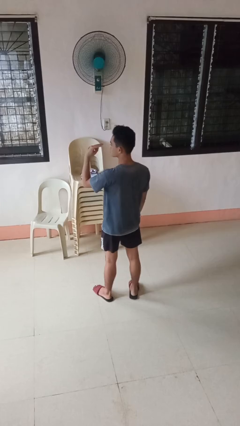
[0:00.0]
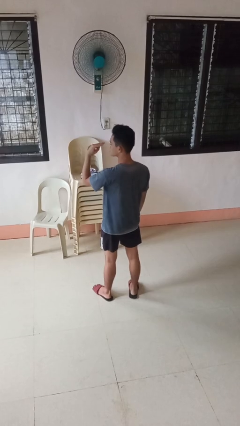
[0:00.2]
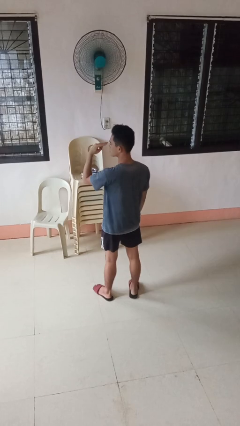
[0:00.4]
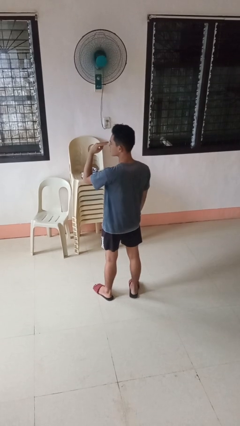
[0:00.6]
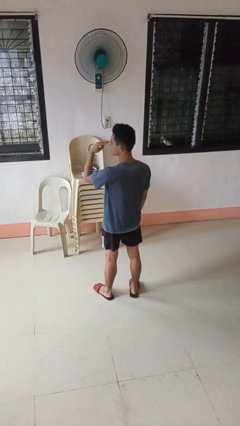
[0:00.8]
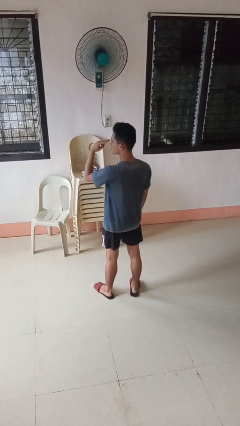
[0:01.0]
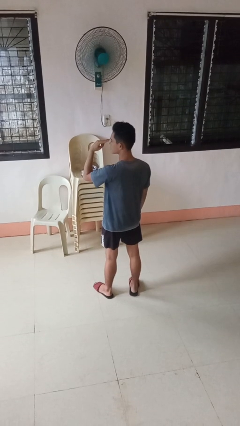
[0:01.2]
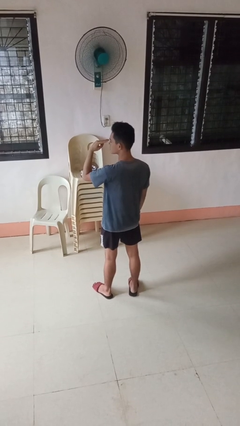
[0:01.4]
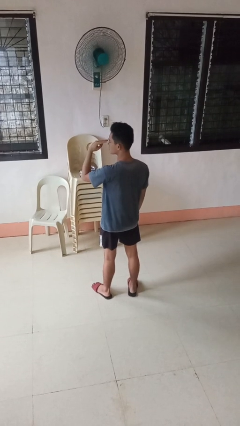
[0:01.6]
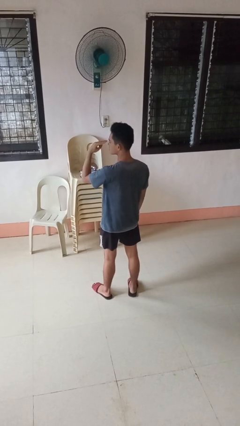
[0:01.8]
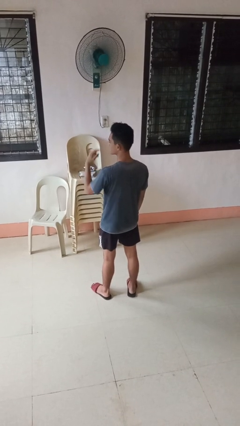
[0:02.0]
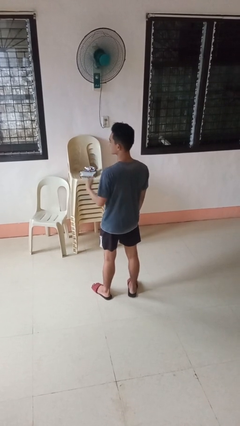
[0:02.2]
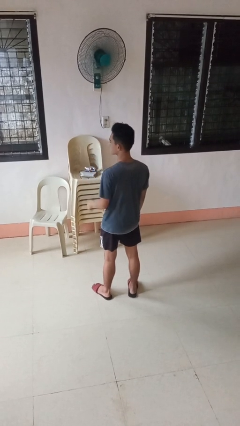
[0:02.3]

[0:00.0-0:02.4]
person gestures watch closely

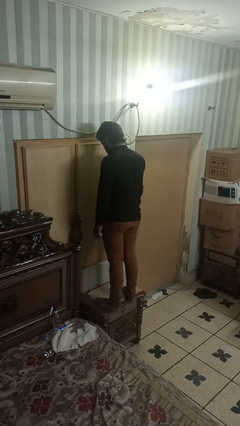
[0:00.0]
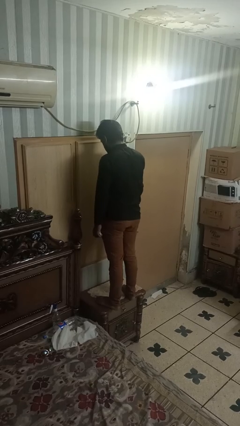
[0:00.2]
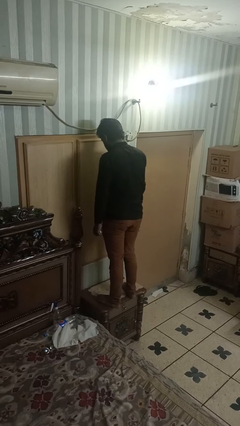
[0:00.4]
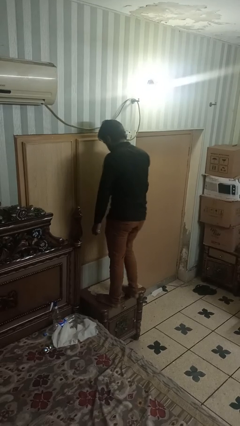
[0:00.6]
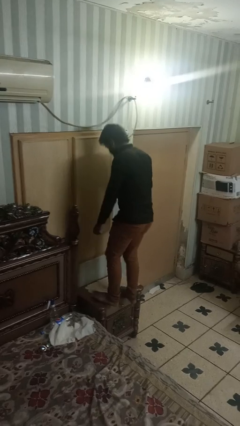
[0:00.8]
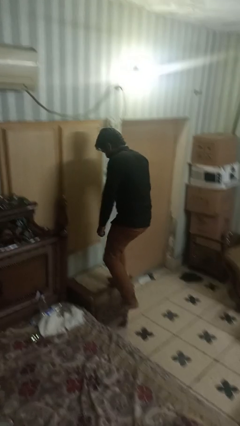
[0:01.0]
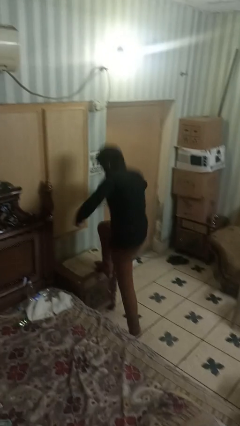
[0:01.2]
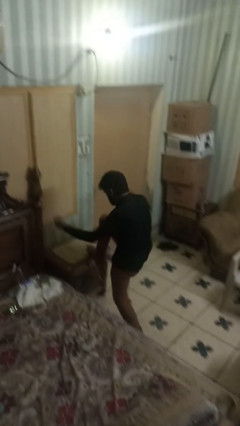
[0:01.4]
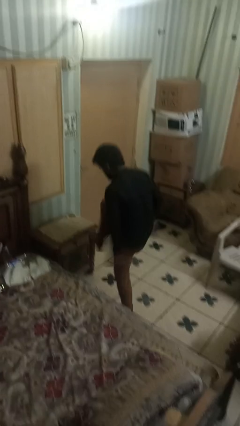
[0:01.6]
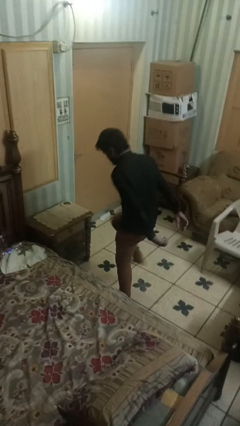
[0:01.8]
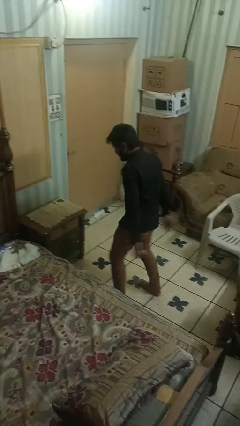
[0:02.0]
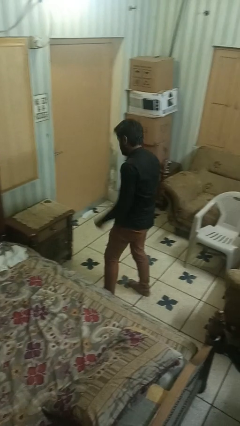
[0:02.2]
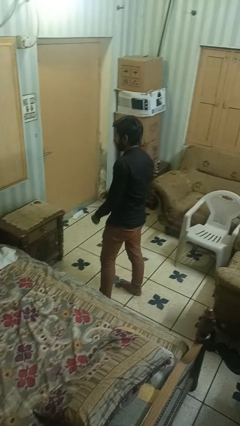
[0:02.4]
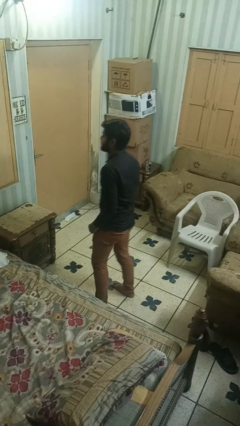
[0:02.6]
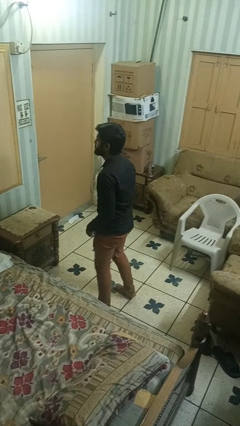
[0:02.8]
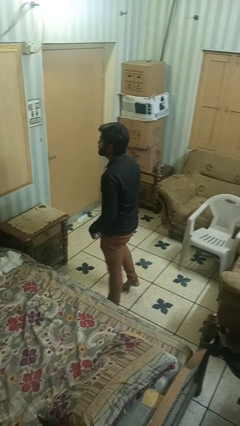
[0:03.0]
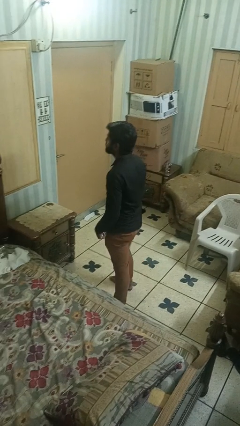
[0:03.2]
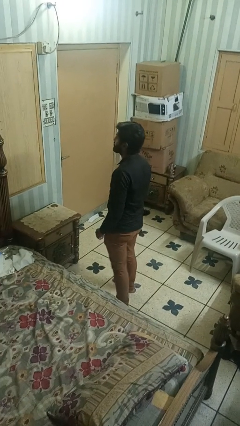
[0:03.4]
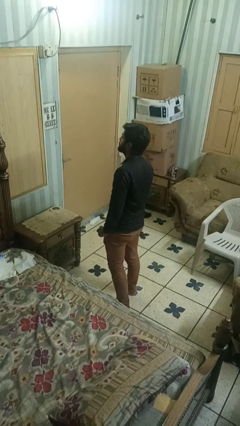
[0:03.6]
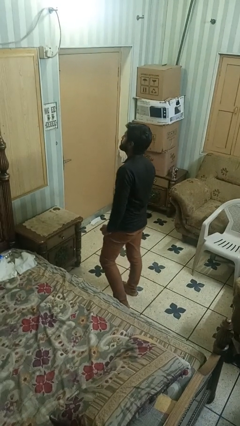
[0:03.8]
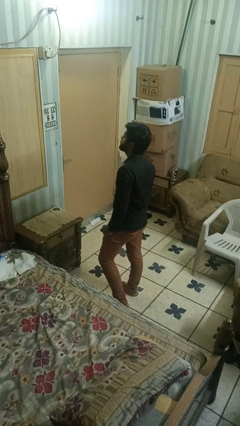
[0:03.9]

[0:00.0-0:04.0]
person climbs off table

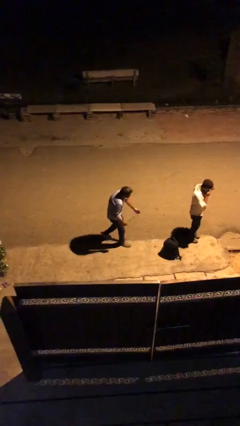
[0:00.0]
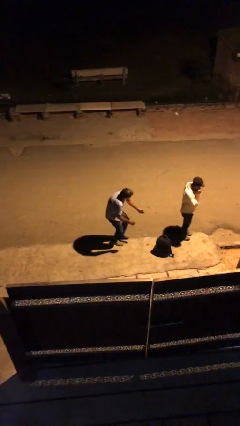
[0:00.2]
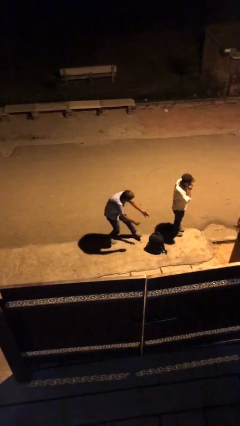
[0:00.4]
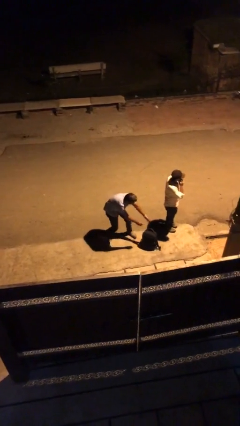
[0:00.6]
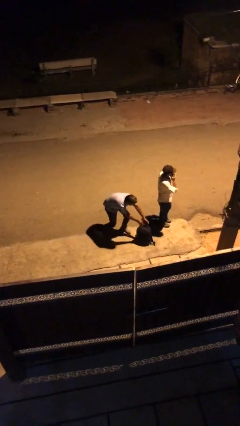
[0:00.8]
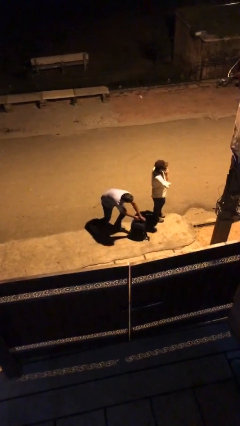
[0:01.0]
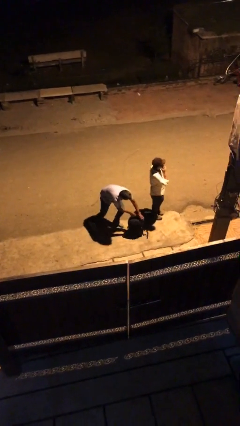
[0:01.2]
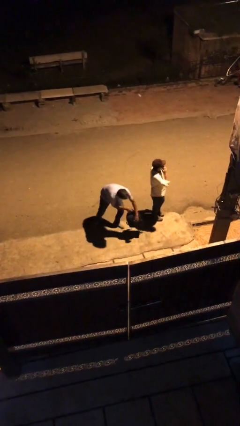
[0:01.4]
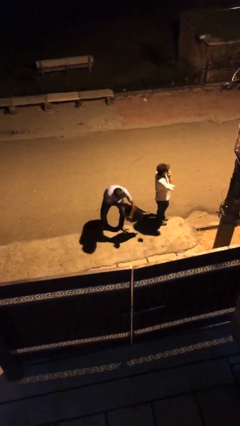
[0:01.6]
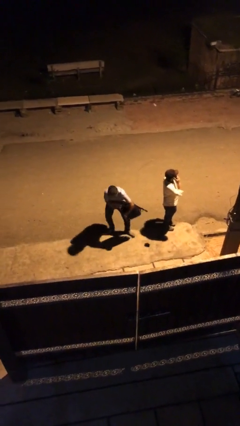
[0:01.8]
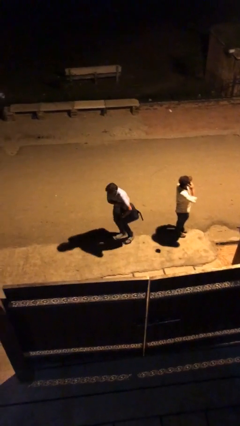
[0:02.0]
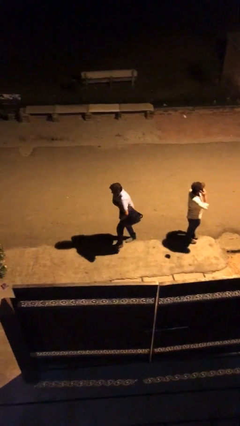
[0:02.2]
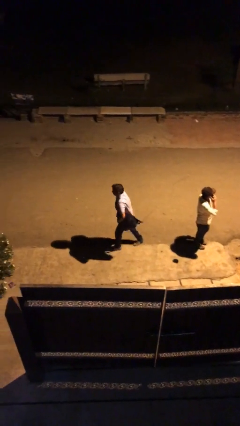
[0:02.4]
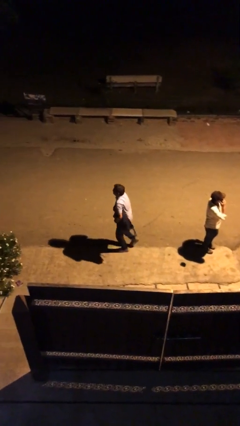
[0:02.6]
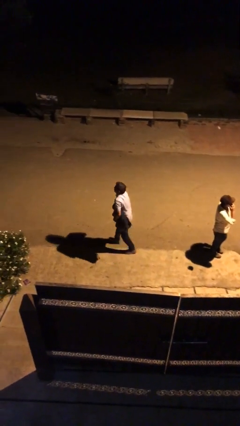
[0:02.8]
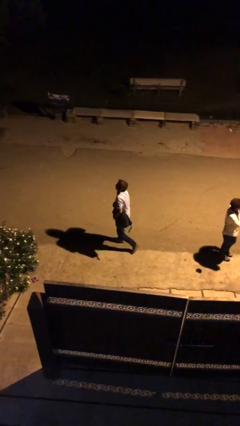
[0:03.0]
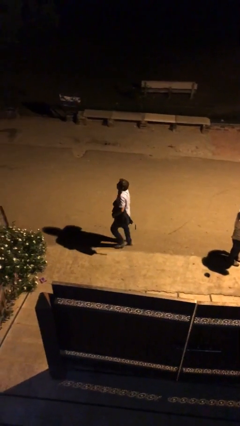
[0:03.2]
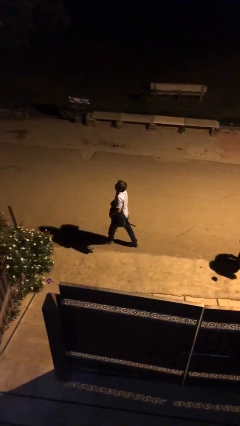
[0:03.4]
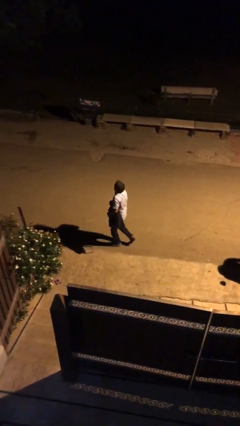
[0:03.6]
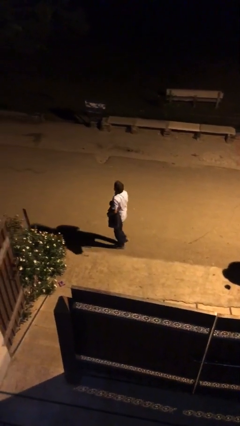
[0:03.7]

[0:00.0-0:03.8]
person steals object from person

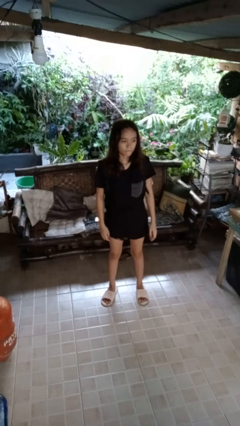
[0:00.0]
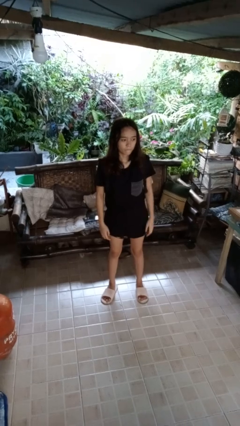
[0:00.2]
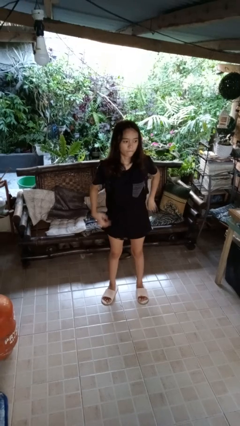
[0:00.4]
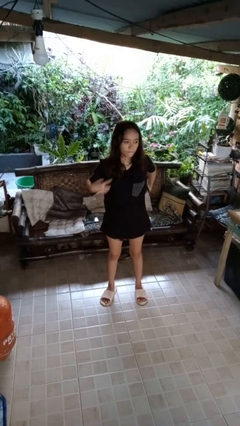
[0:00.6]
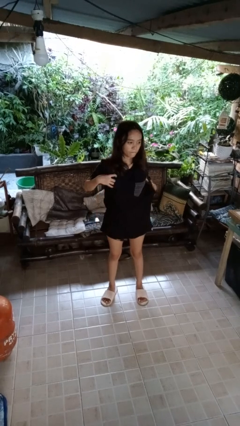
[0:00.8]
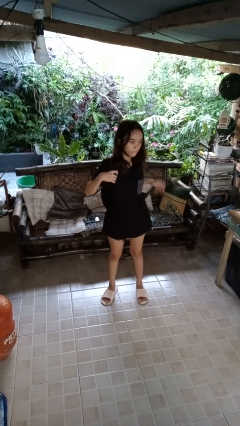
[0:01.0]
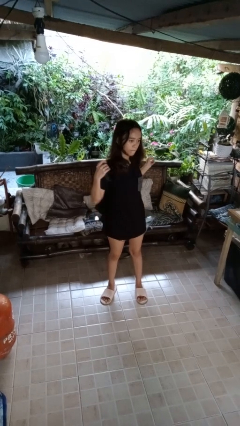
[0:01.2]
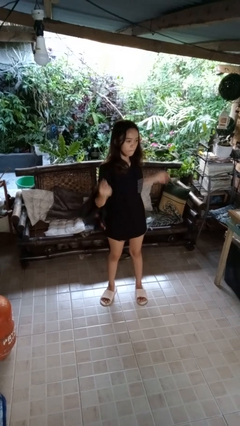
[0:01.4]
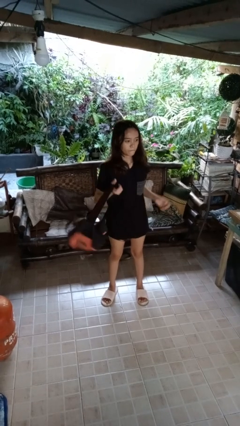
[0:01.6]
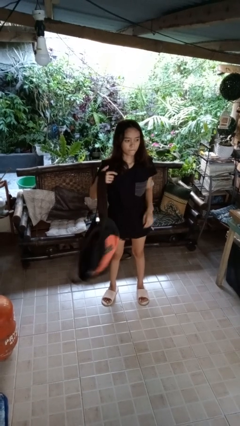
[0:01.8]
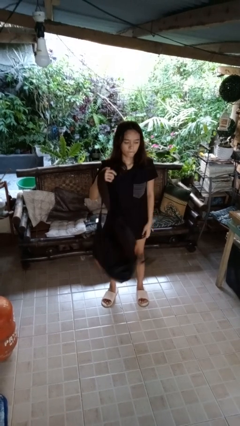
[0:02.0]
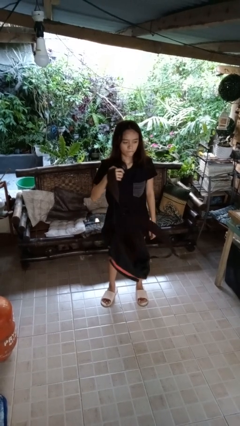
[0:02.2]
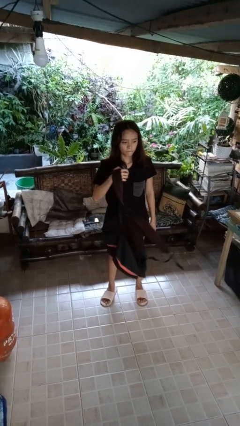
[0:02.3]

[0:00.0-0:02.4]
person takes off backpack

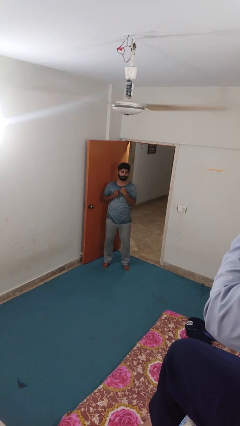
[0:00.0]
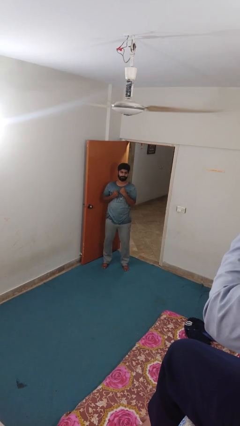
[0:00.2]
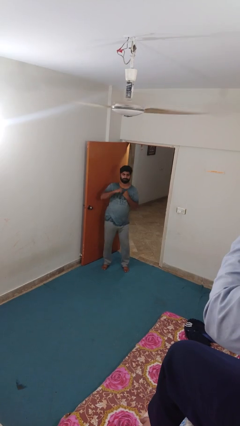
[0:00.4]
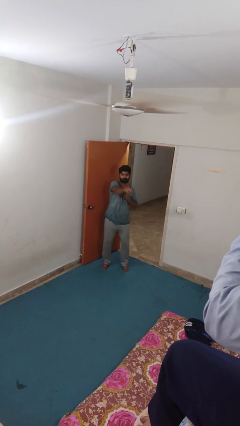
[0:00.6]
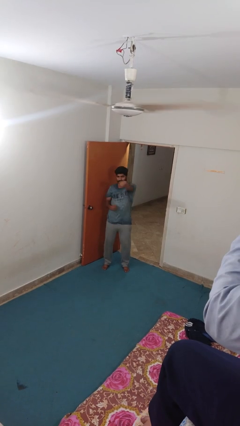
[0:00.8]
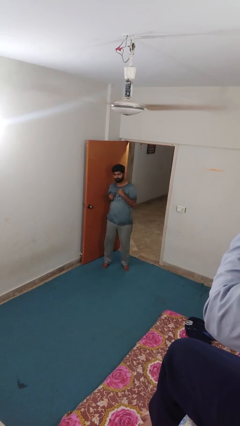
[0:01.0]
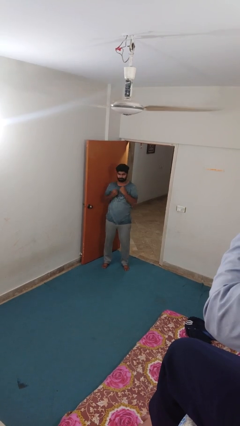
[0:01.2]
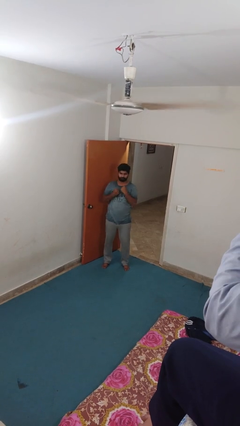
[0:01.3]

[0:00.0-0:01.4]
person punches

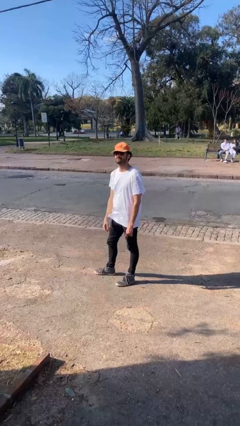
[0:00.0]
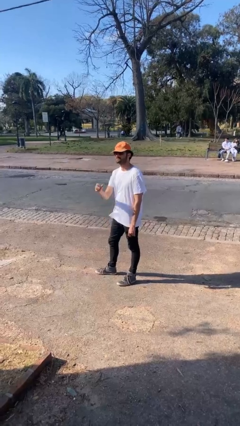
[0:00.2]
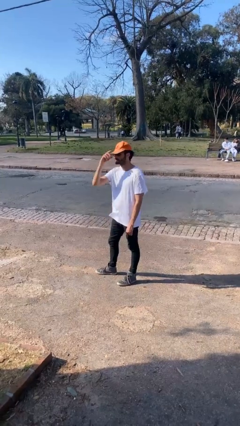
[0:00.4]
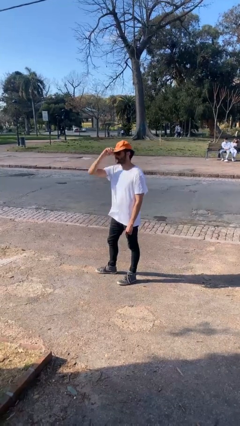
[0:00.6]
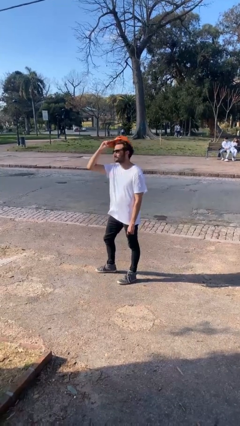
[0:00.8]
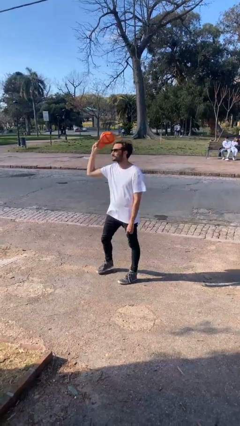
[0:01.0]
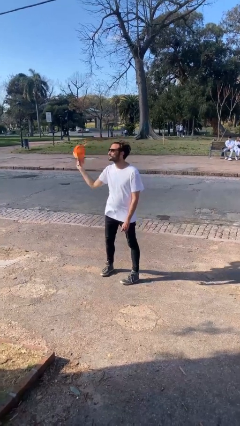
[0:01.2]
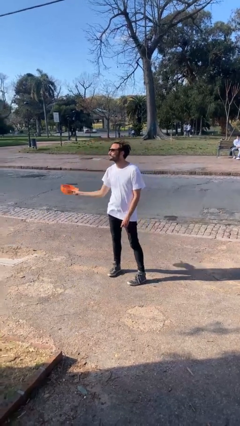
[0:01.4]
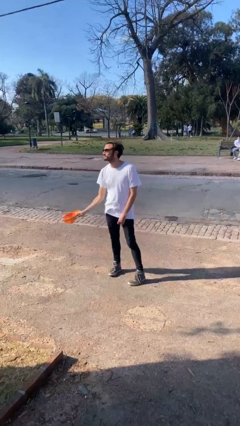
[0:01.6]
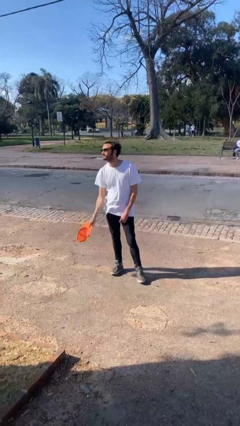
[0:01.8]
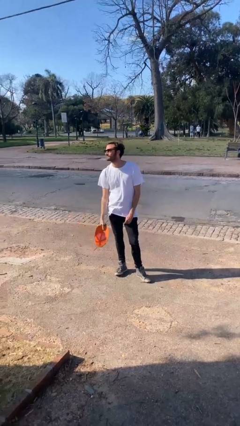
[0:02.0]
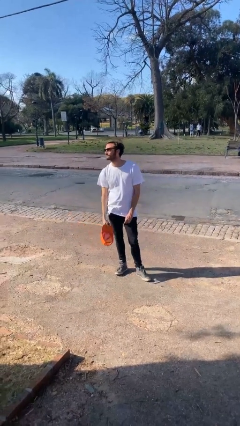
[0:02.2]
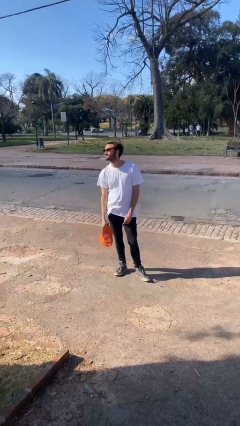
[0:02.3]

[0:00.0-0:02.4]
person takes off hat

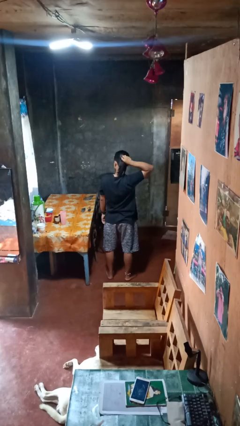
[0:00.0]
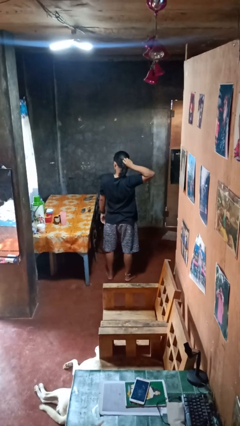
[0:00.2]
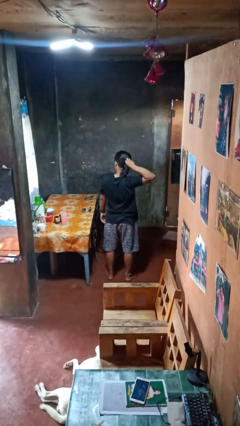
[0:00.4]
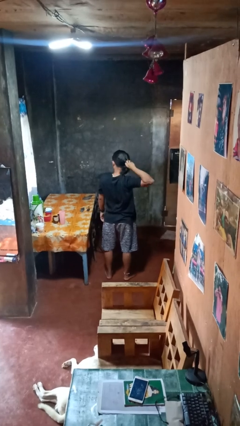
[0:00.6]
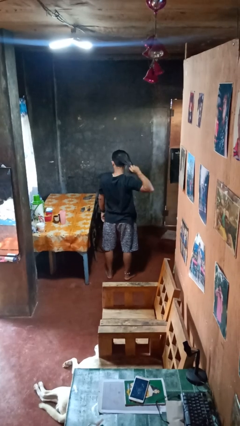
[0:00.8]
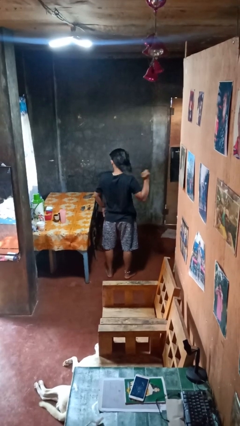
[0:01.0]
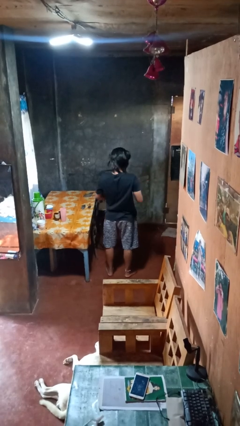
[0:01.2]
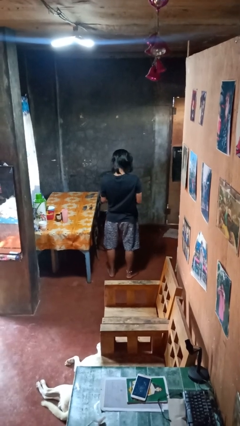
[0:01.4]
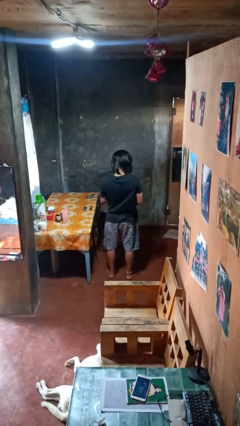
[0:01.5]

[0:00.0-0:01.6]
person takes off hairtie
